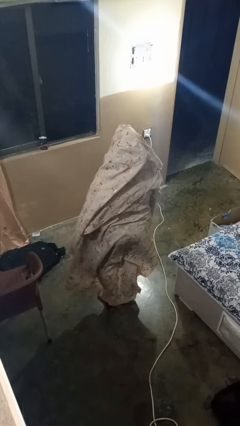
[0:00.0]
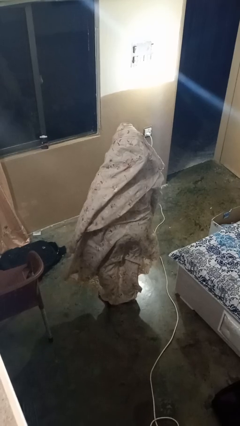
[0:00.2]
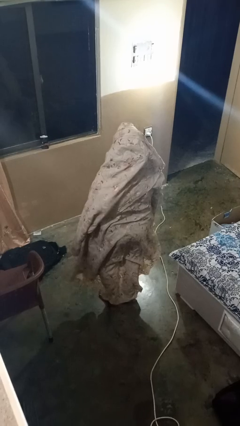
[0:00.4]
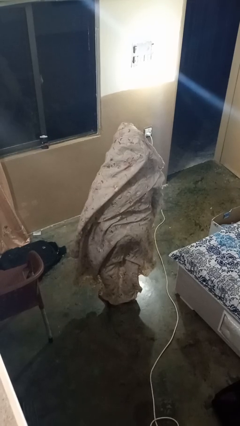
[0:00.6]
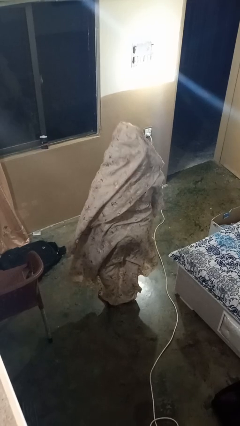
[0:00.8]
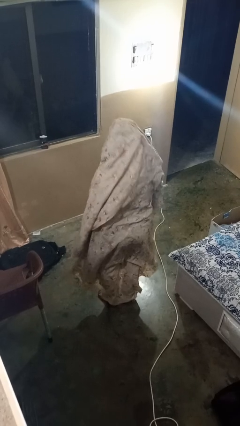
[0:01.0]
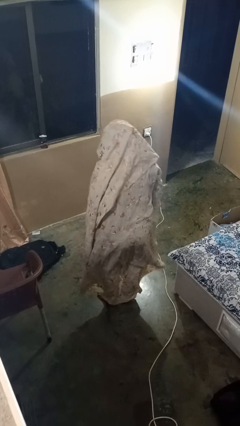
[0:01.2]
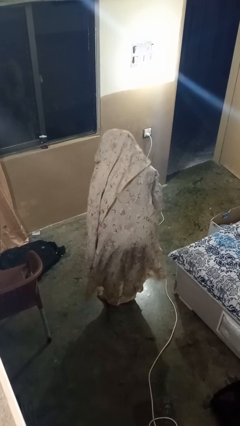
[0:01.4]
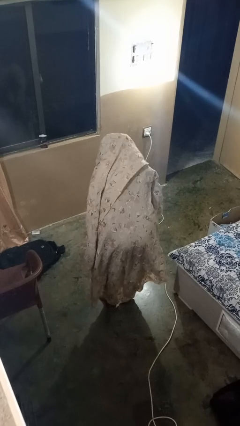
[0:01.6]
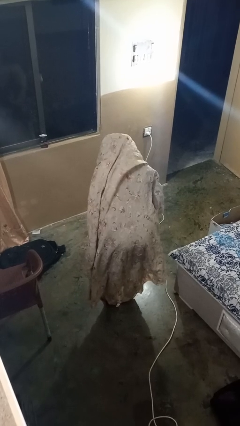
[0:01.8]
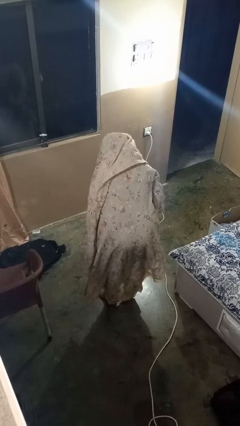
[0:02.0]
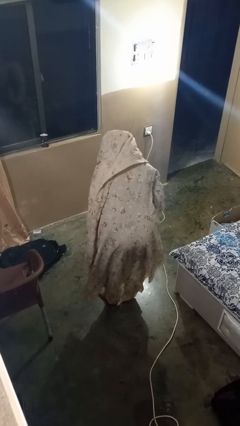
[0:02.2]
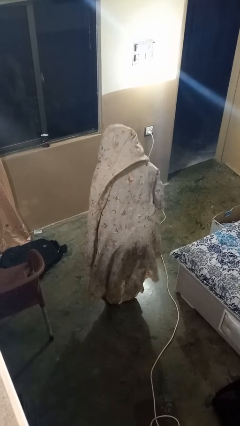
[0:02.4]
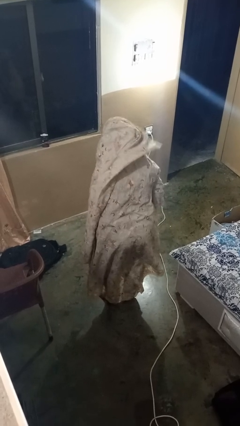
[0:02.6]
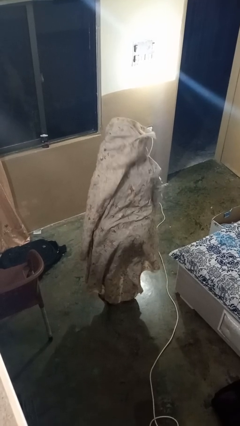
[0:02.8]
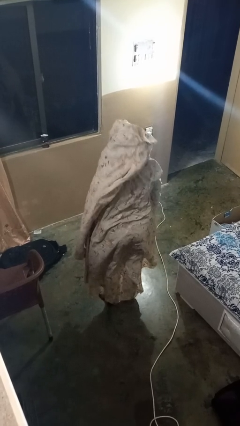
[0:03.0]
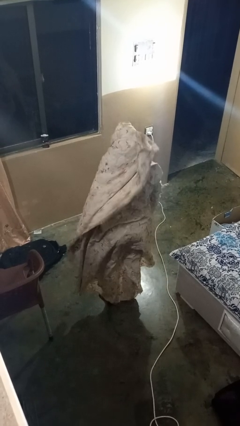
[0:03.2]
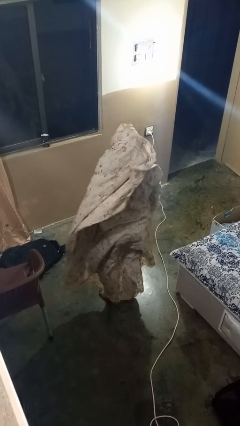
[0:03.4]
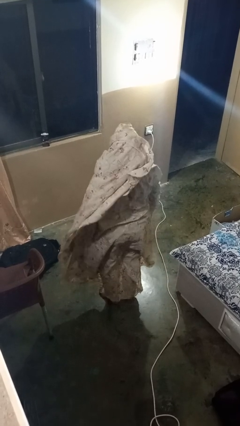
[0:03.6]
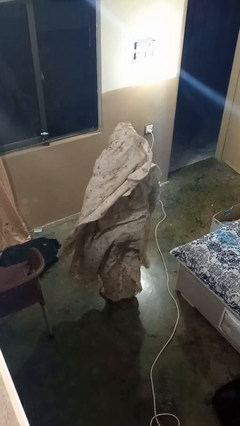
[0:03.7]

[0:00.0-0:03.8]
person bows

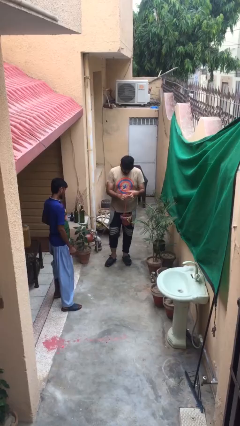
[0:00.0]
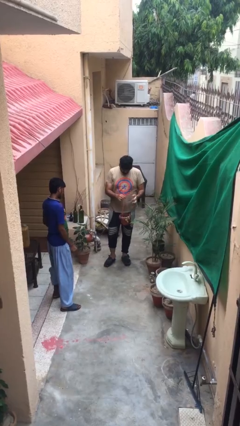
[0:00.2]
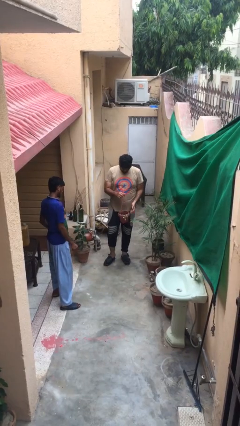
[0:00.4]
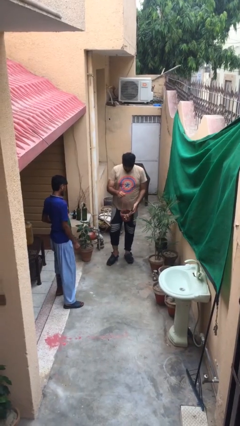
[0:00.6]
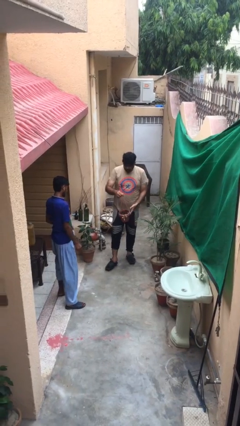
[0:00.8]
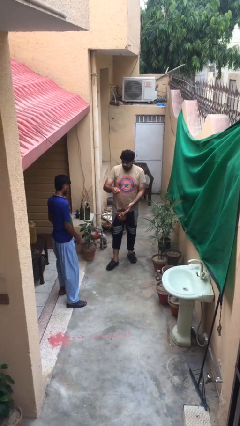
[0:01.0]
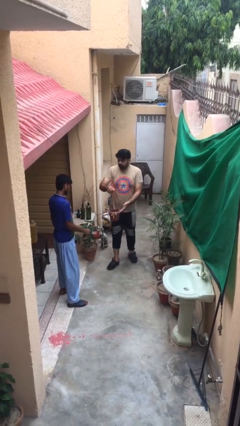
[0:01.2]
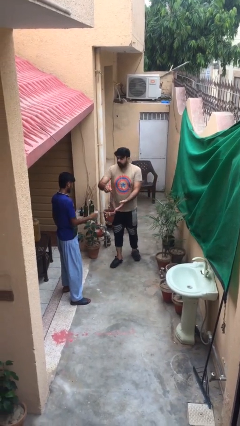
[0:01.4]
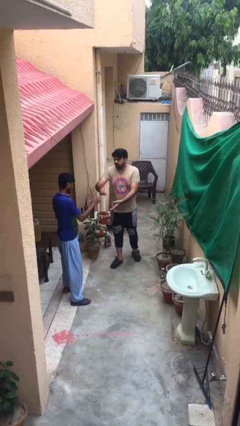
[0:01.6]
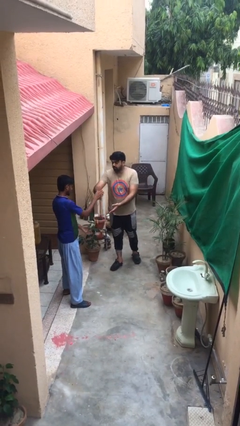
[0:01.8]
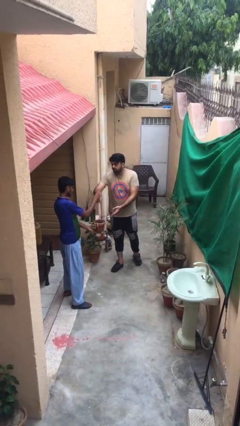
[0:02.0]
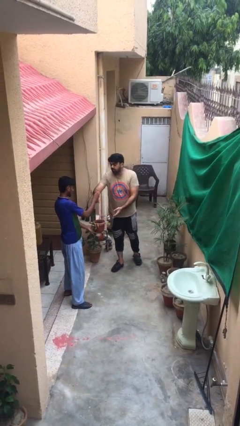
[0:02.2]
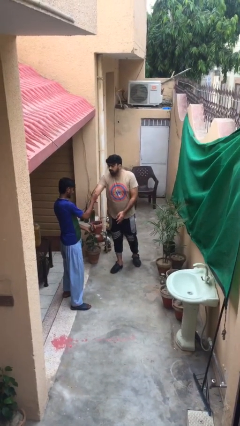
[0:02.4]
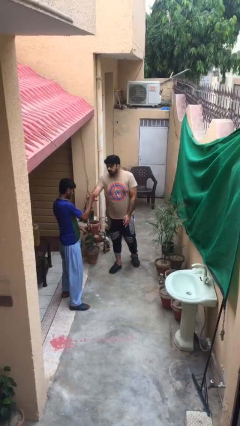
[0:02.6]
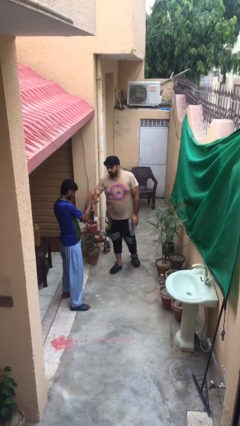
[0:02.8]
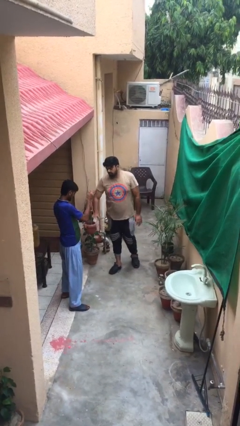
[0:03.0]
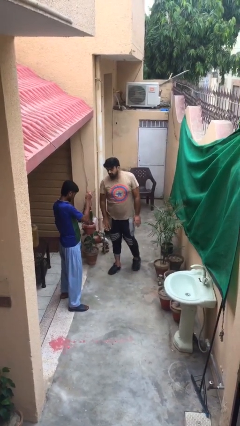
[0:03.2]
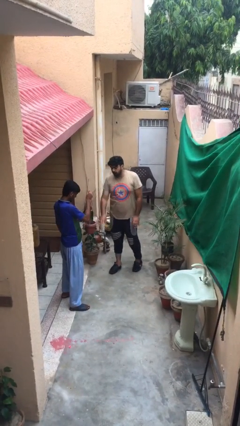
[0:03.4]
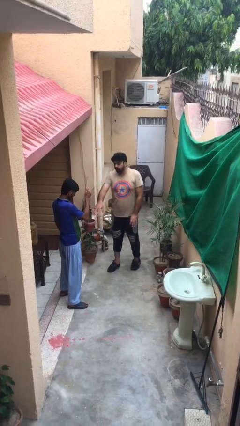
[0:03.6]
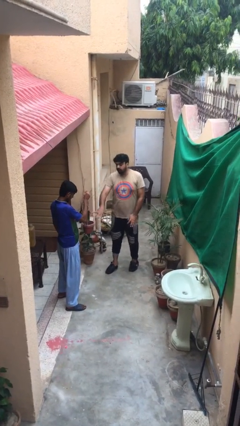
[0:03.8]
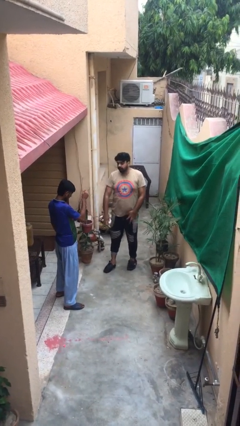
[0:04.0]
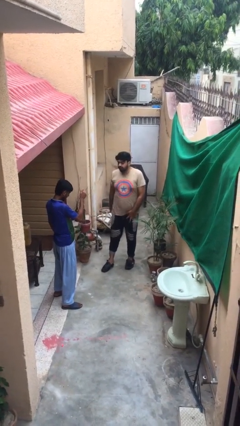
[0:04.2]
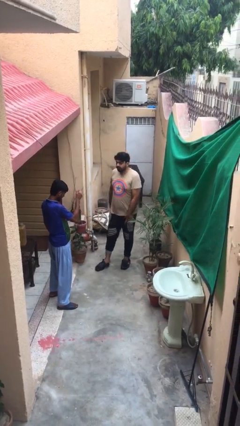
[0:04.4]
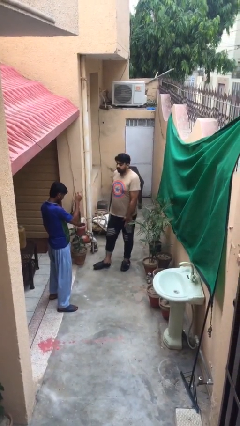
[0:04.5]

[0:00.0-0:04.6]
person transfers object to person

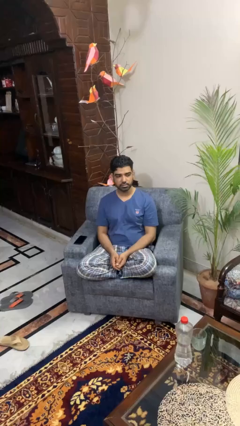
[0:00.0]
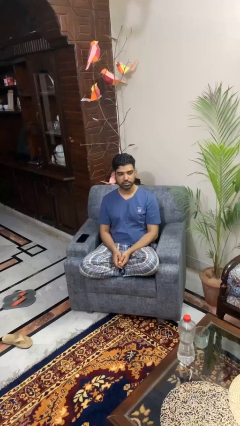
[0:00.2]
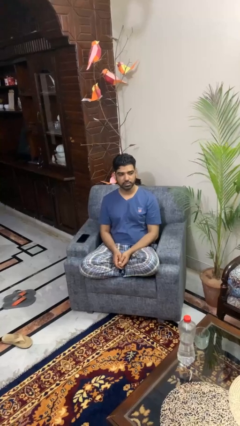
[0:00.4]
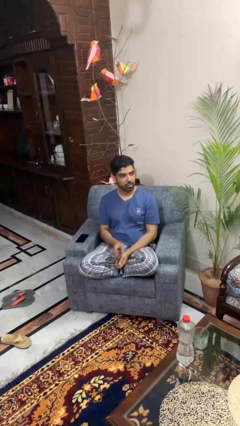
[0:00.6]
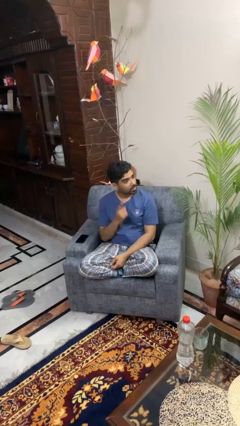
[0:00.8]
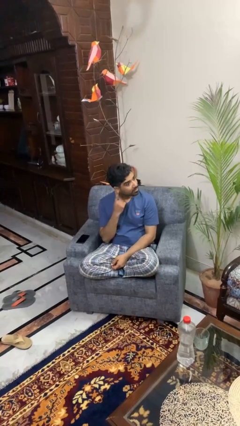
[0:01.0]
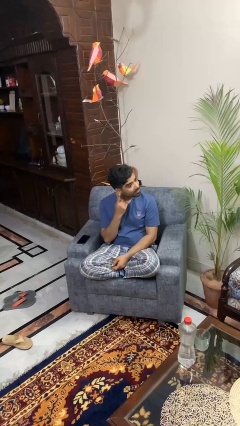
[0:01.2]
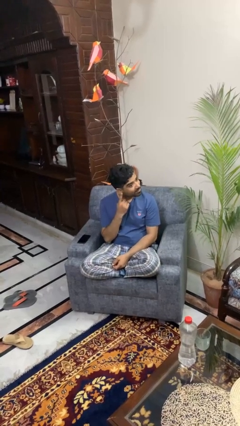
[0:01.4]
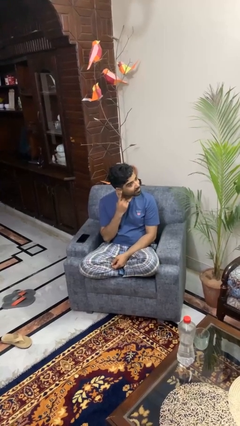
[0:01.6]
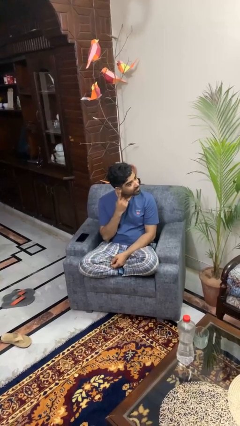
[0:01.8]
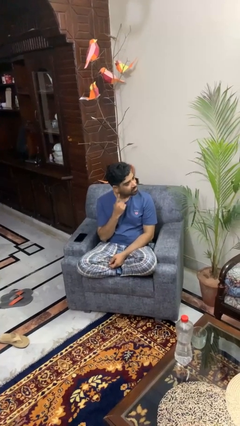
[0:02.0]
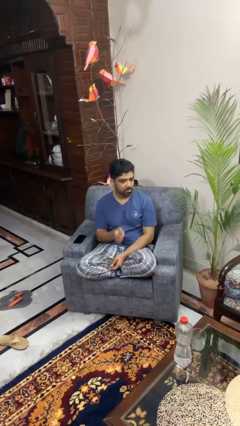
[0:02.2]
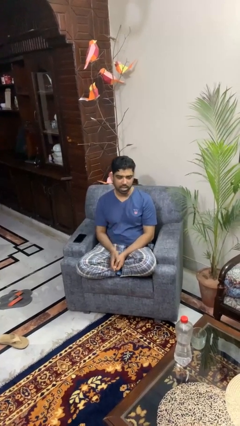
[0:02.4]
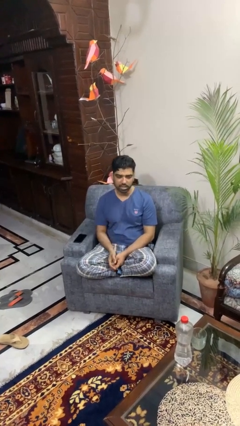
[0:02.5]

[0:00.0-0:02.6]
person gestures listen closely

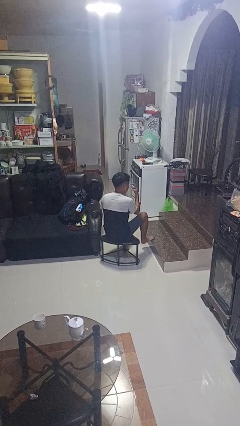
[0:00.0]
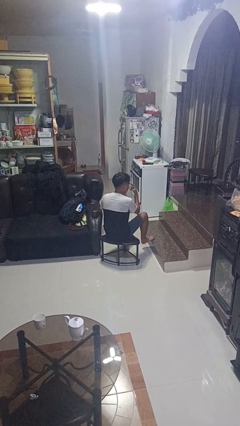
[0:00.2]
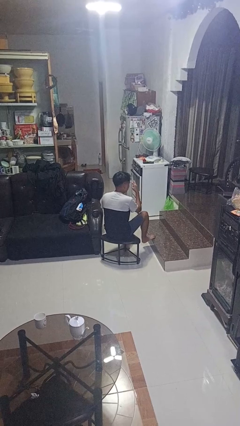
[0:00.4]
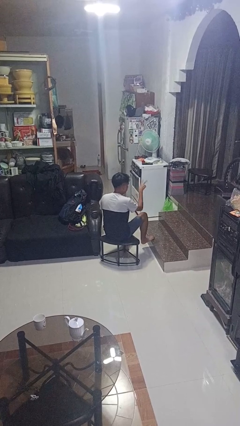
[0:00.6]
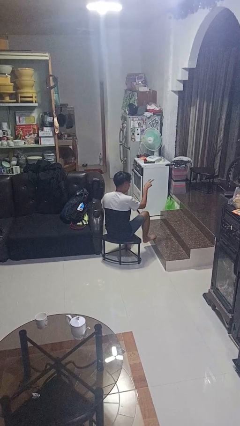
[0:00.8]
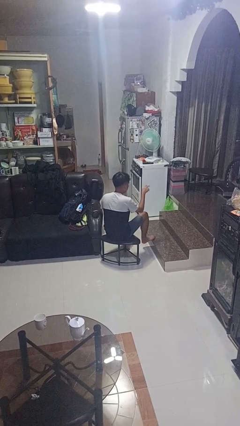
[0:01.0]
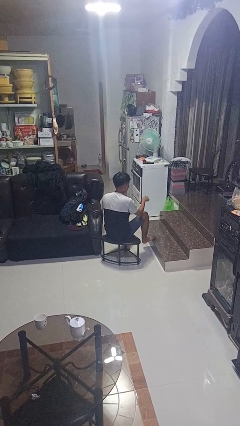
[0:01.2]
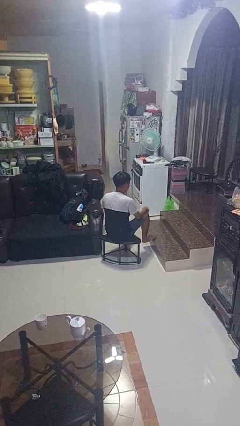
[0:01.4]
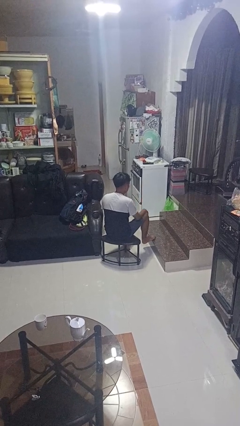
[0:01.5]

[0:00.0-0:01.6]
person gestures watch closely

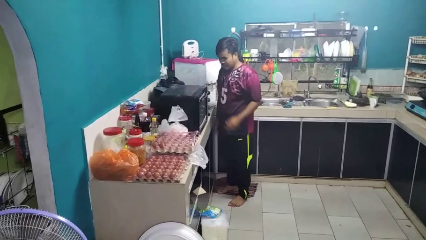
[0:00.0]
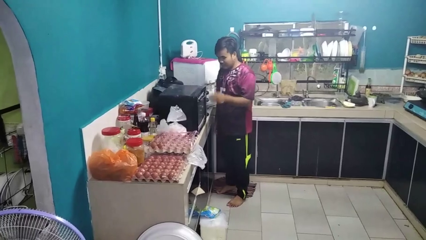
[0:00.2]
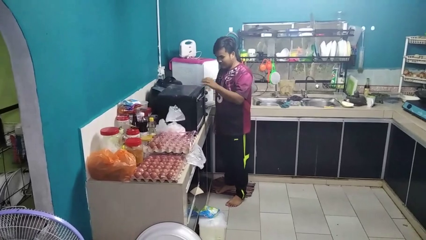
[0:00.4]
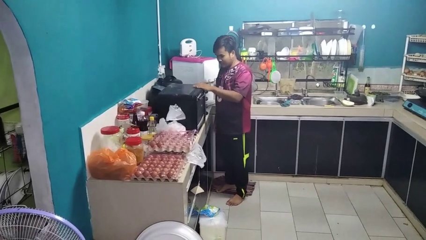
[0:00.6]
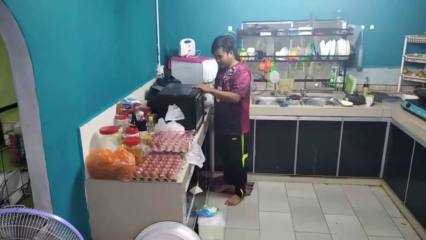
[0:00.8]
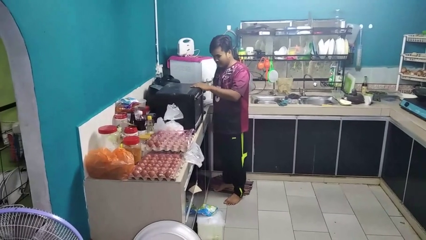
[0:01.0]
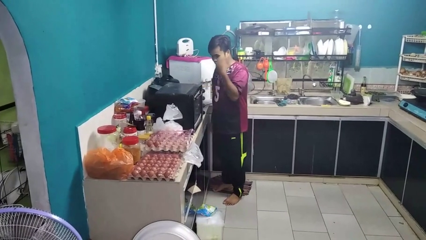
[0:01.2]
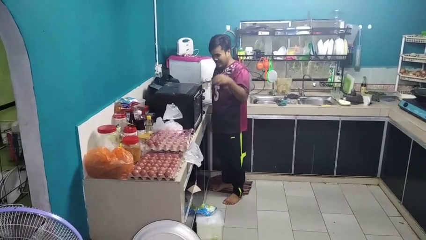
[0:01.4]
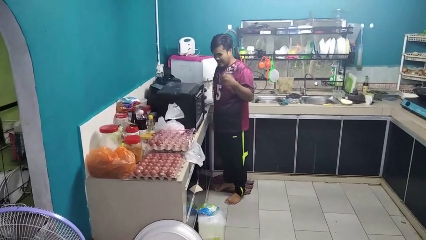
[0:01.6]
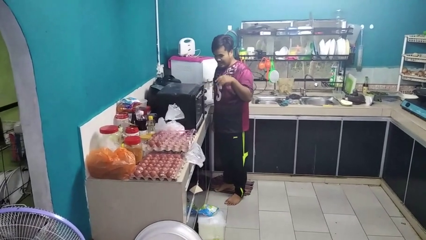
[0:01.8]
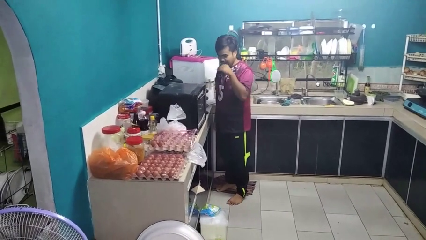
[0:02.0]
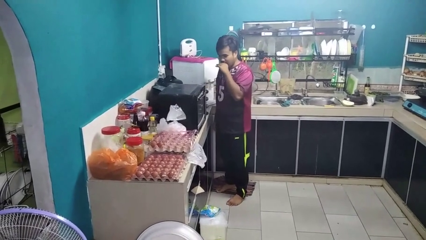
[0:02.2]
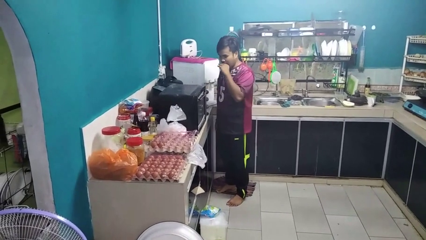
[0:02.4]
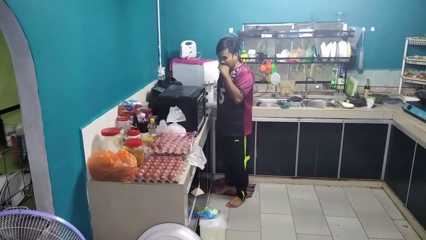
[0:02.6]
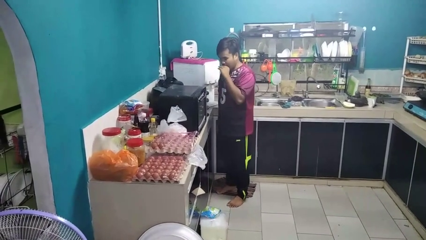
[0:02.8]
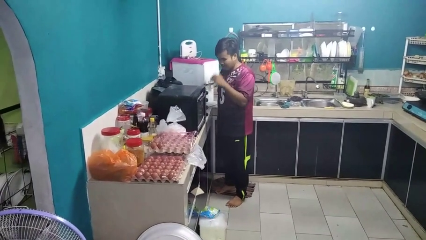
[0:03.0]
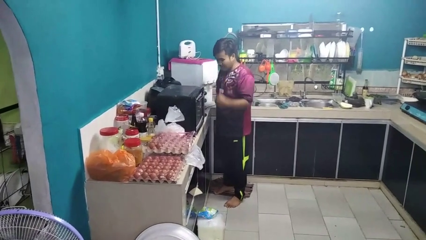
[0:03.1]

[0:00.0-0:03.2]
person burns hand

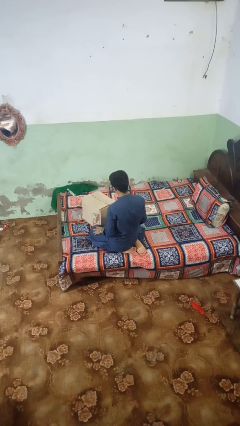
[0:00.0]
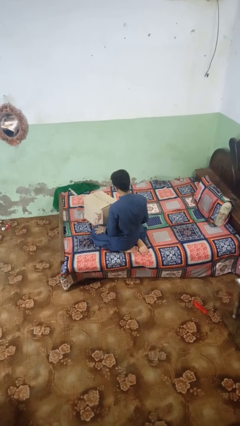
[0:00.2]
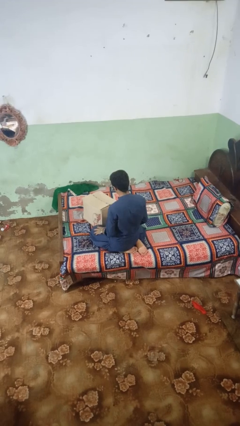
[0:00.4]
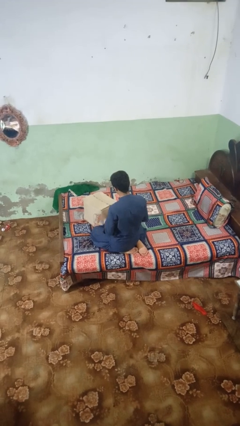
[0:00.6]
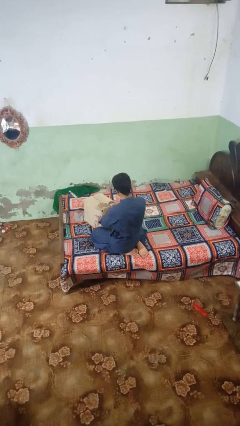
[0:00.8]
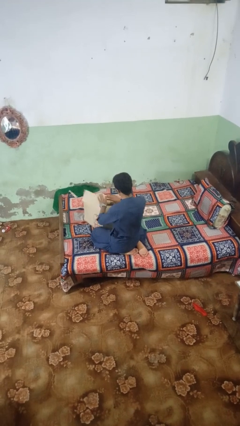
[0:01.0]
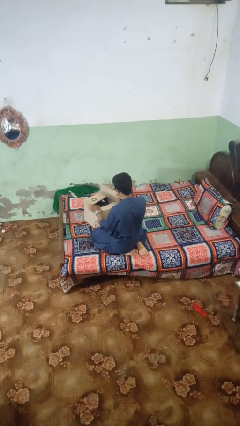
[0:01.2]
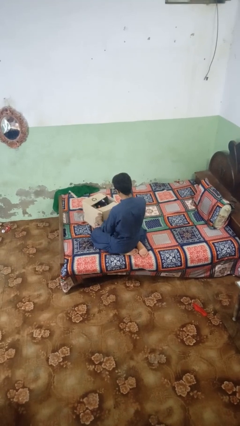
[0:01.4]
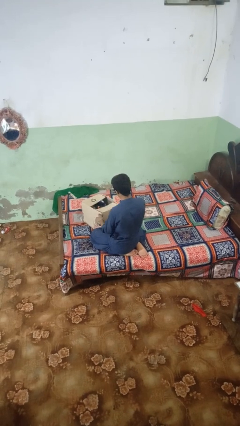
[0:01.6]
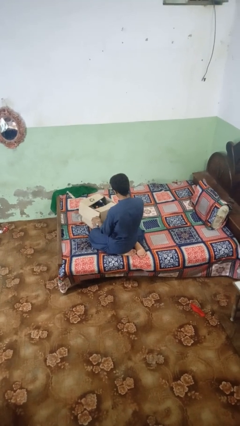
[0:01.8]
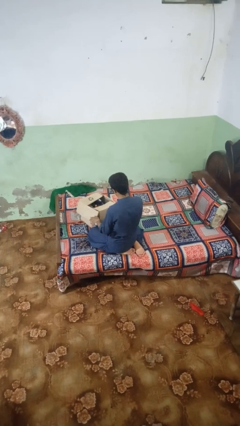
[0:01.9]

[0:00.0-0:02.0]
person opens box
